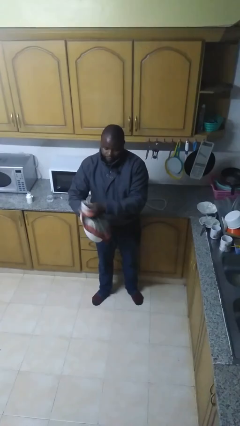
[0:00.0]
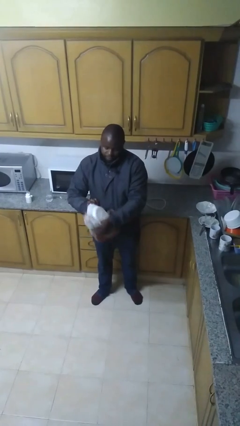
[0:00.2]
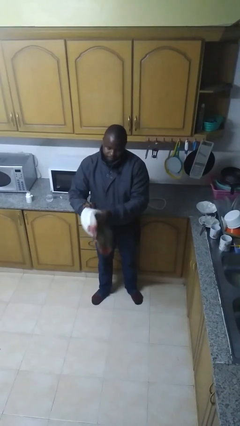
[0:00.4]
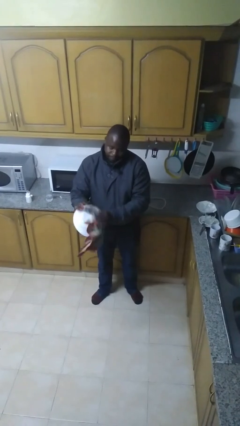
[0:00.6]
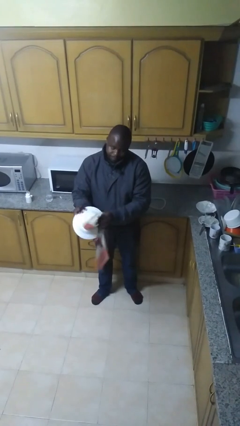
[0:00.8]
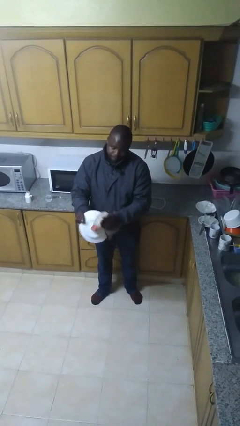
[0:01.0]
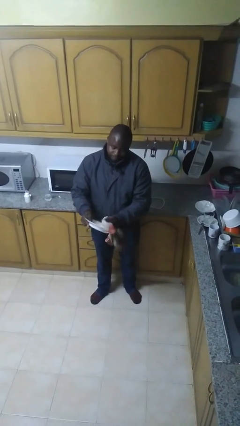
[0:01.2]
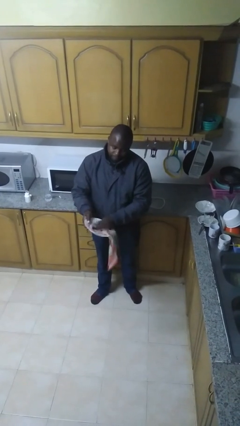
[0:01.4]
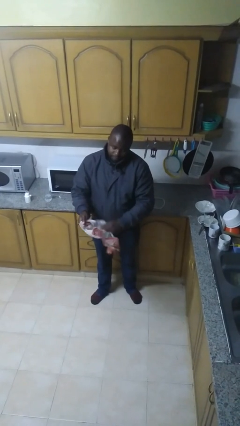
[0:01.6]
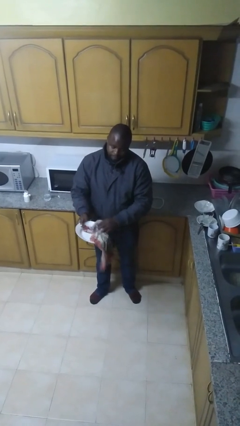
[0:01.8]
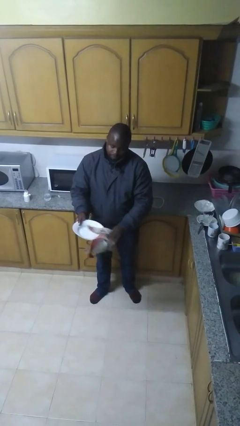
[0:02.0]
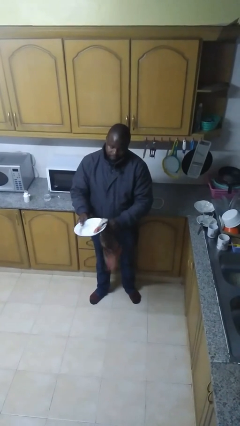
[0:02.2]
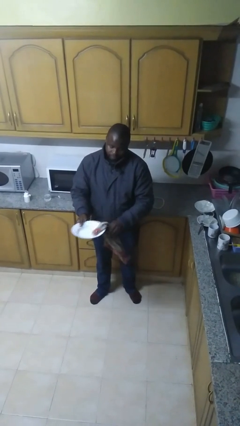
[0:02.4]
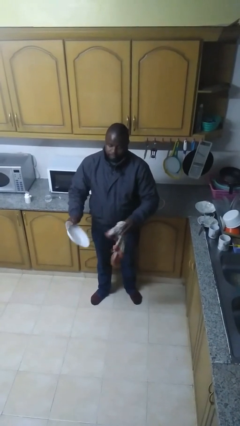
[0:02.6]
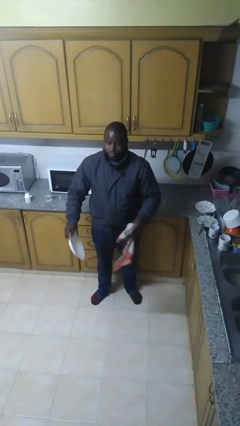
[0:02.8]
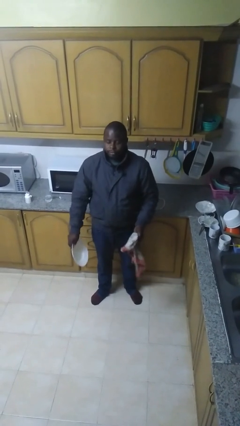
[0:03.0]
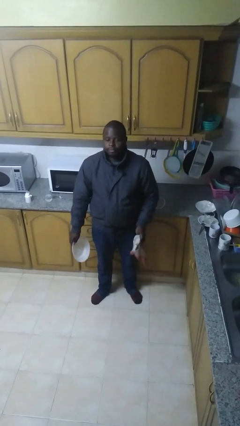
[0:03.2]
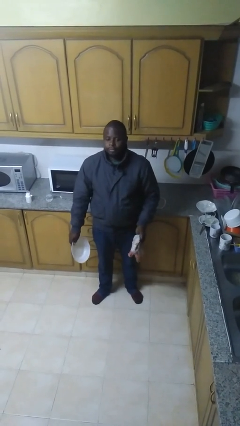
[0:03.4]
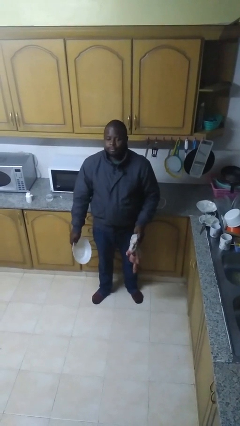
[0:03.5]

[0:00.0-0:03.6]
person dries dish

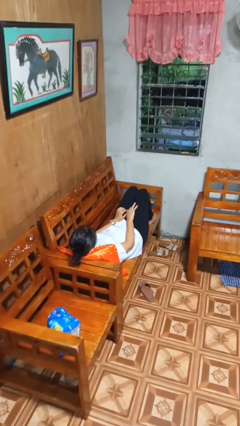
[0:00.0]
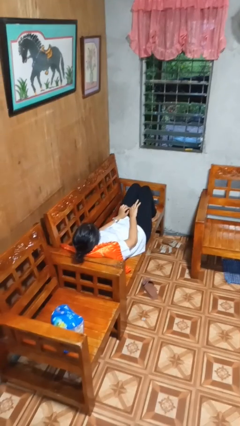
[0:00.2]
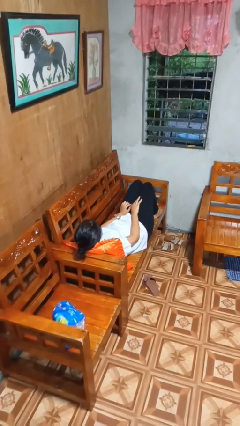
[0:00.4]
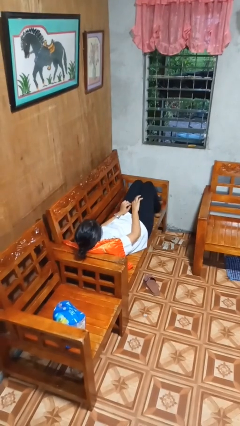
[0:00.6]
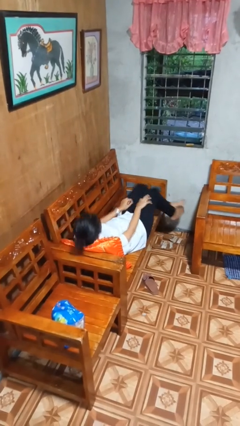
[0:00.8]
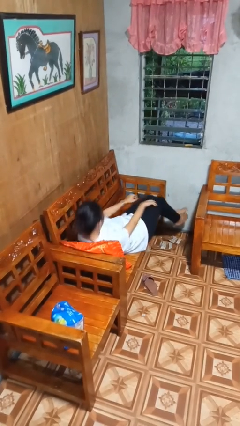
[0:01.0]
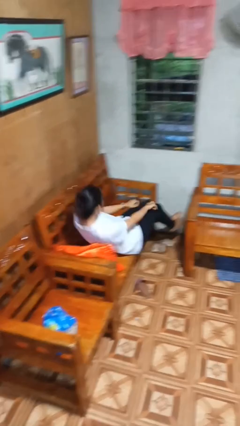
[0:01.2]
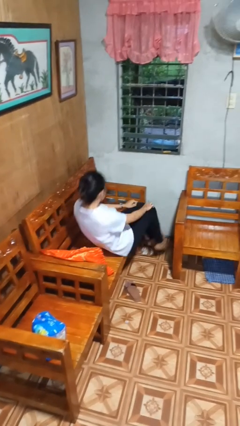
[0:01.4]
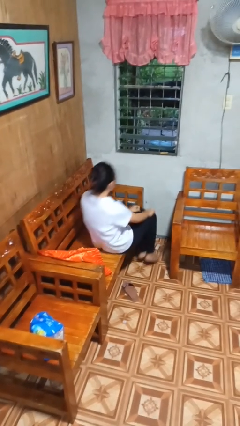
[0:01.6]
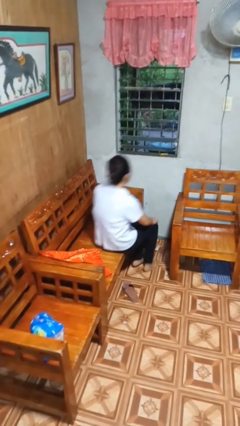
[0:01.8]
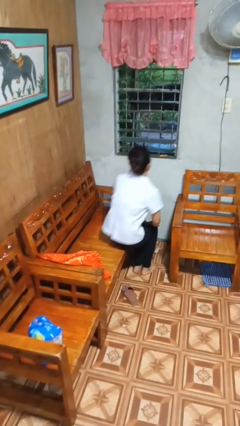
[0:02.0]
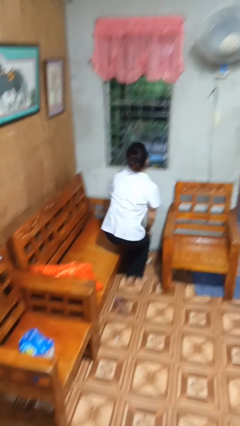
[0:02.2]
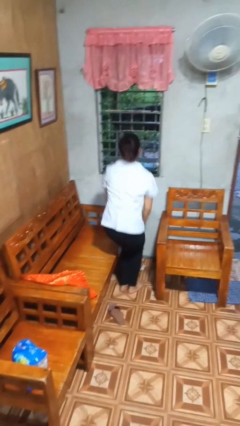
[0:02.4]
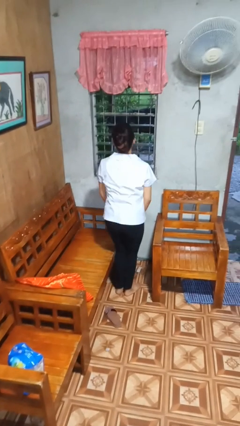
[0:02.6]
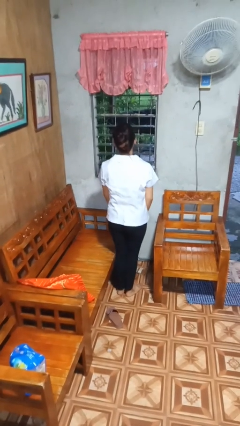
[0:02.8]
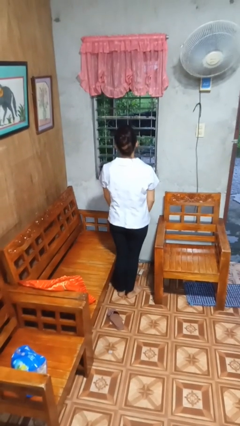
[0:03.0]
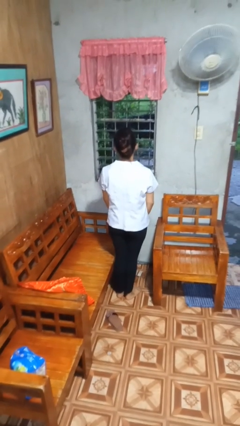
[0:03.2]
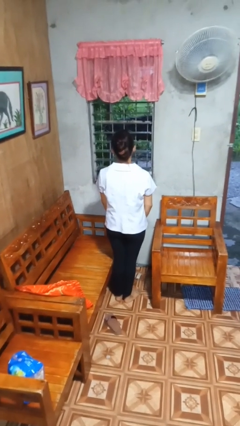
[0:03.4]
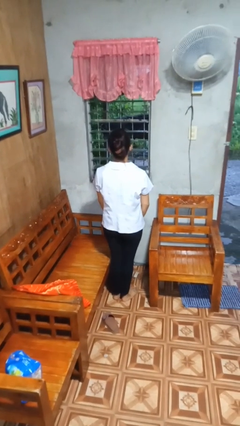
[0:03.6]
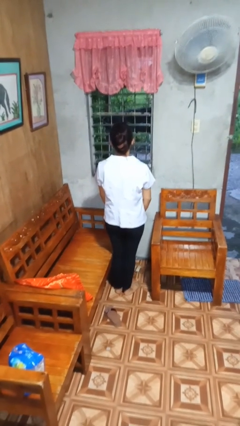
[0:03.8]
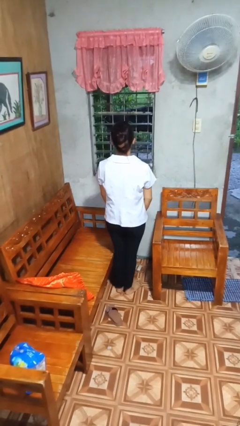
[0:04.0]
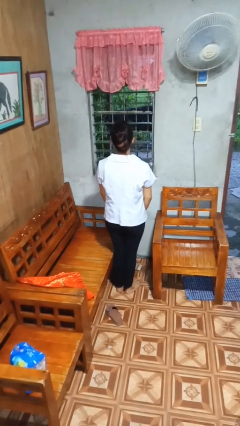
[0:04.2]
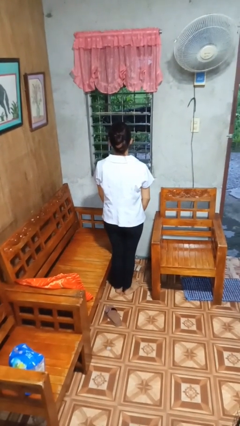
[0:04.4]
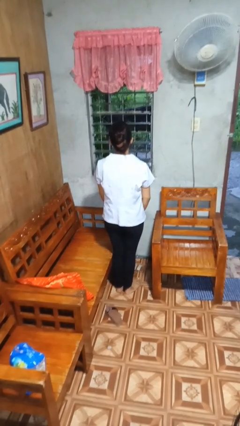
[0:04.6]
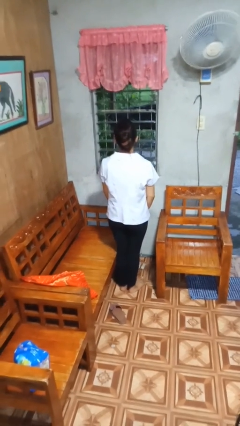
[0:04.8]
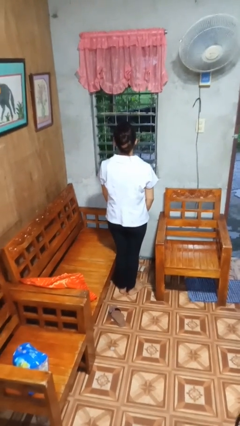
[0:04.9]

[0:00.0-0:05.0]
person stands up

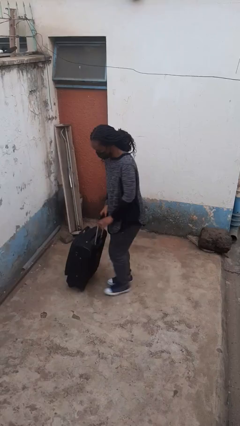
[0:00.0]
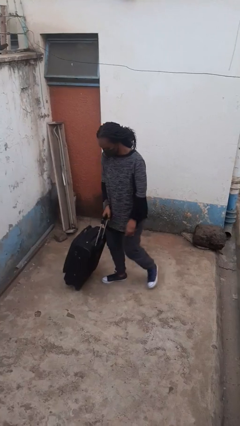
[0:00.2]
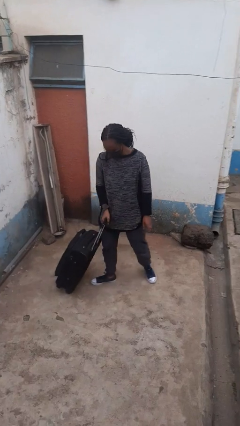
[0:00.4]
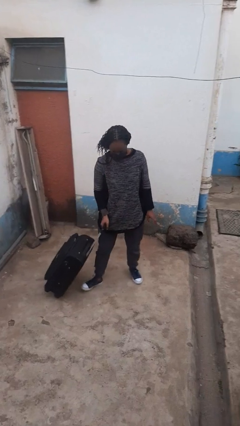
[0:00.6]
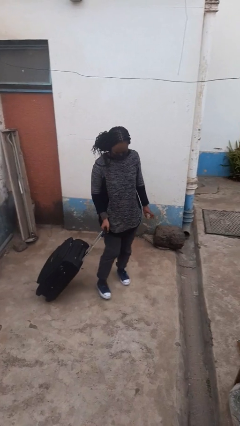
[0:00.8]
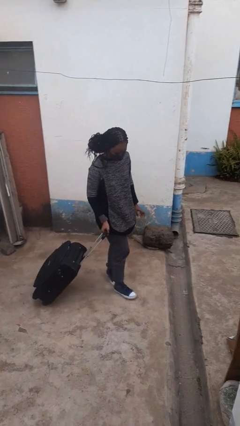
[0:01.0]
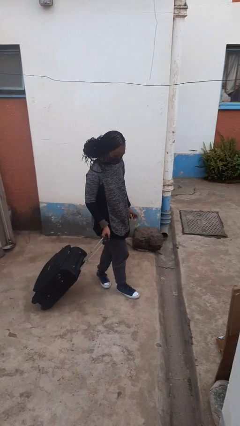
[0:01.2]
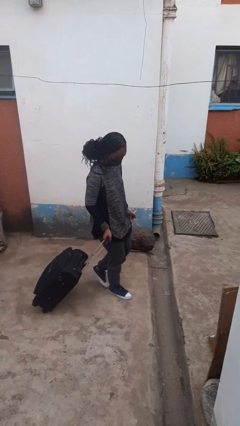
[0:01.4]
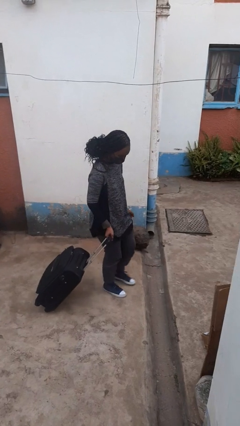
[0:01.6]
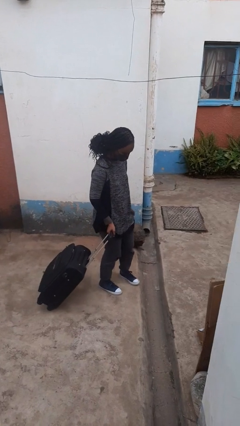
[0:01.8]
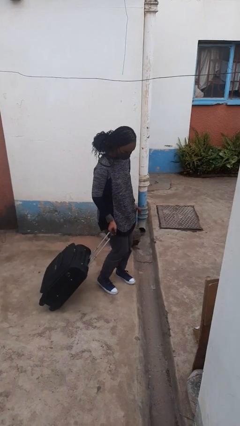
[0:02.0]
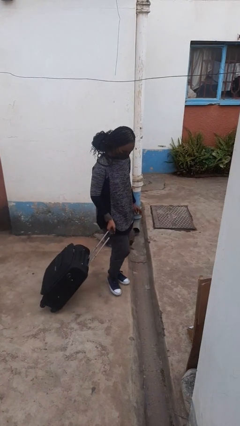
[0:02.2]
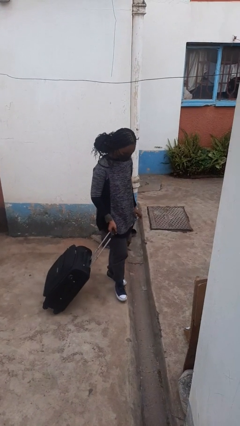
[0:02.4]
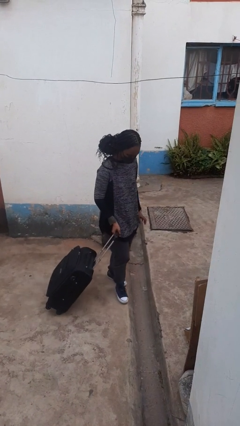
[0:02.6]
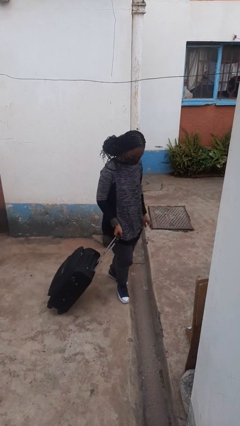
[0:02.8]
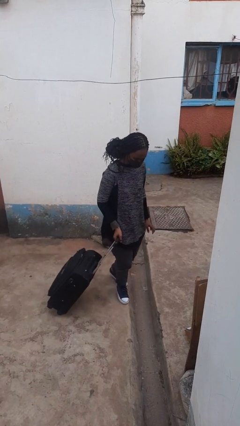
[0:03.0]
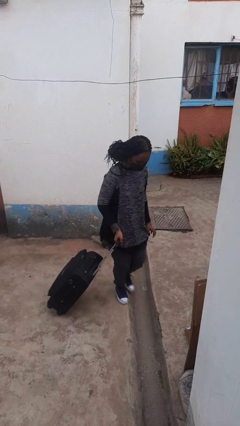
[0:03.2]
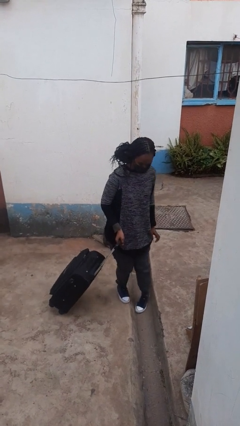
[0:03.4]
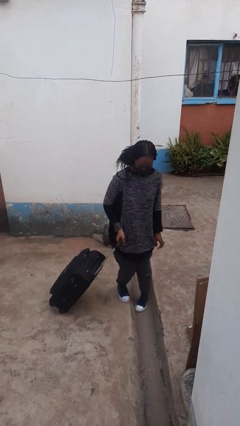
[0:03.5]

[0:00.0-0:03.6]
person pulls wheeled cart

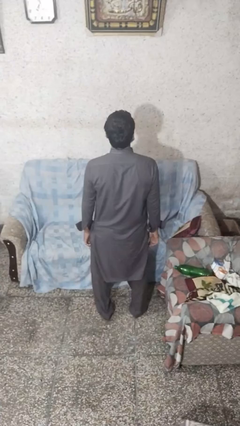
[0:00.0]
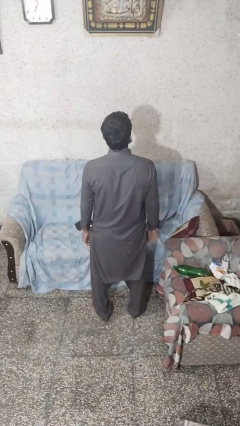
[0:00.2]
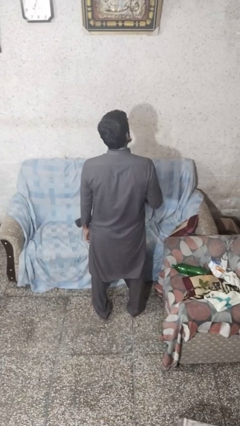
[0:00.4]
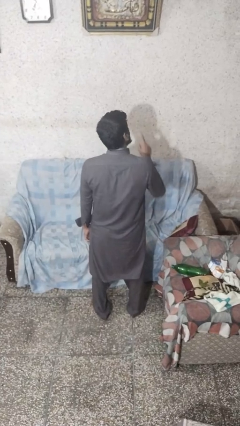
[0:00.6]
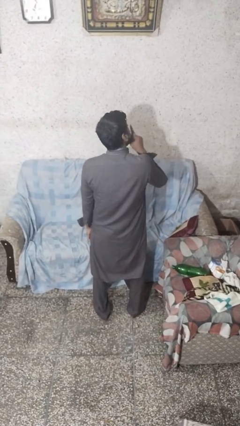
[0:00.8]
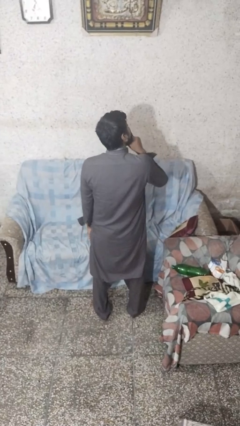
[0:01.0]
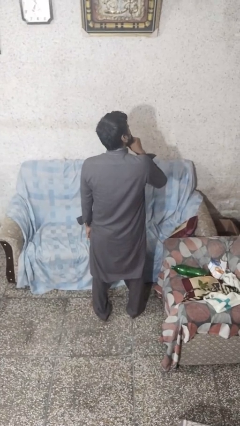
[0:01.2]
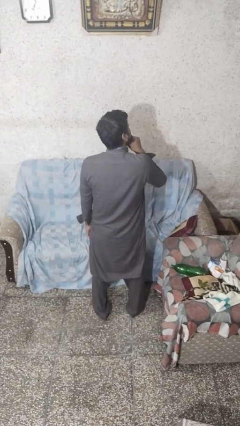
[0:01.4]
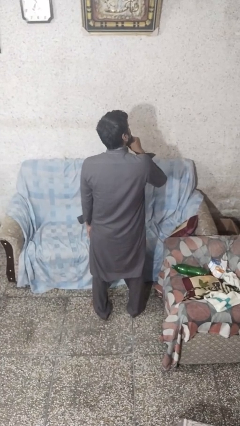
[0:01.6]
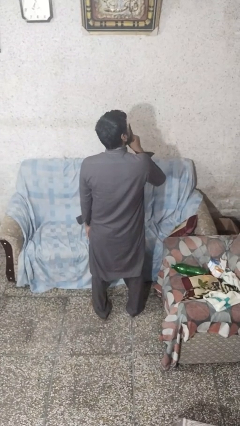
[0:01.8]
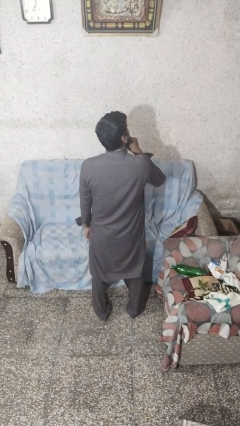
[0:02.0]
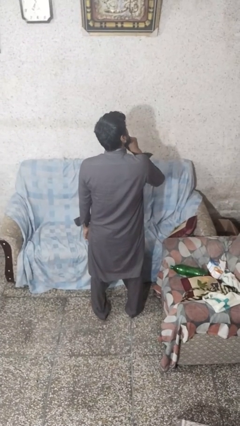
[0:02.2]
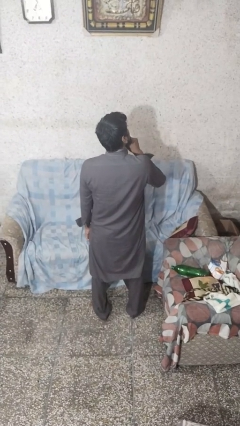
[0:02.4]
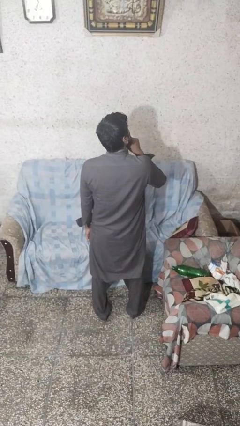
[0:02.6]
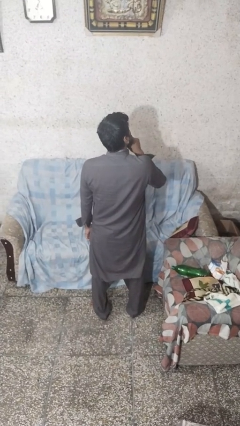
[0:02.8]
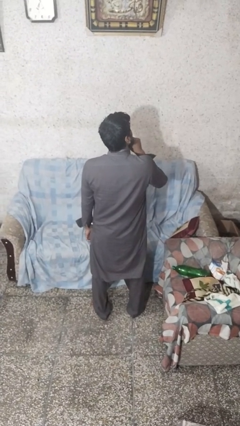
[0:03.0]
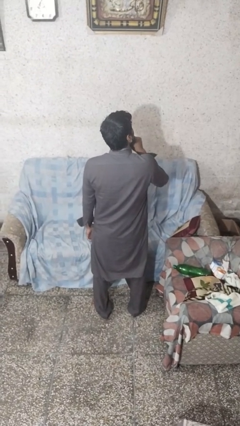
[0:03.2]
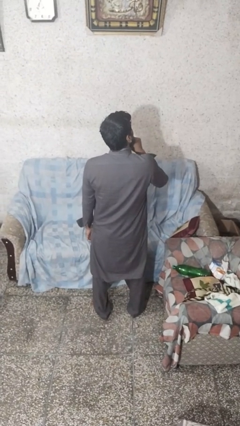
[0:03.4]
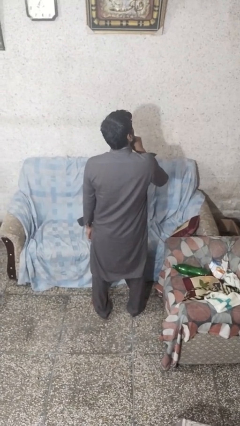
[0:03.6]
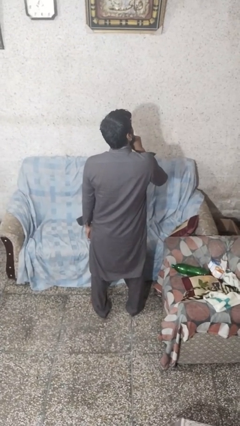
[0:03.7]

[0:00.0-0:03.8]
person gestures be quiet

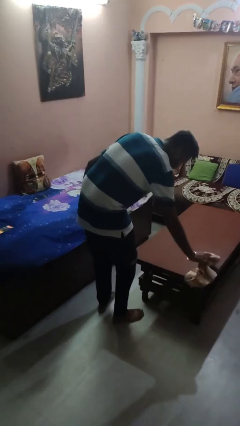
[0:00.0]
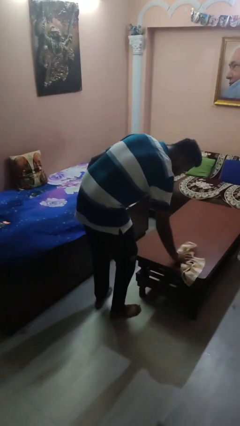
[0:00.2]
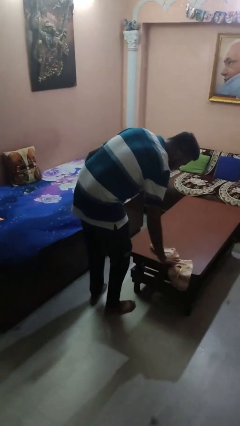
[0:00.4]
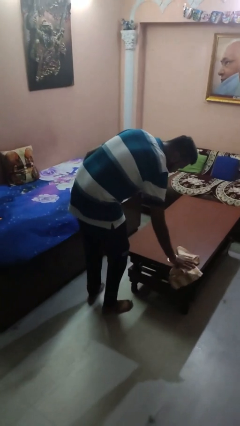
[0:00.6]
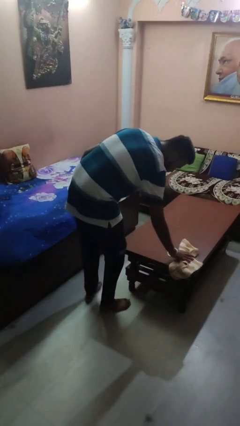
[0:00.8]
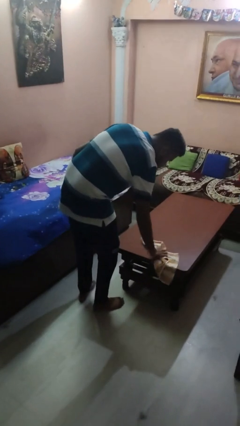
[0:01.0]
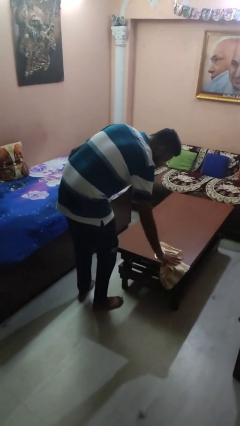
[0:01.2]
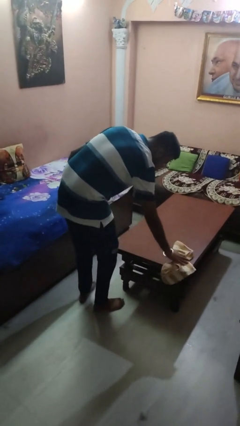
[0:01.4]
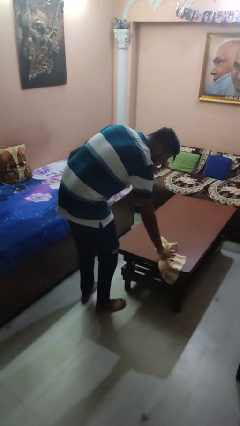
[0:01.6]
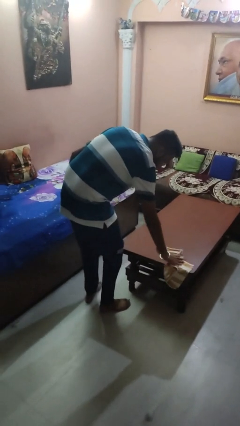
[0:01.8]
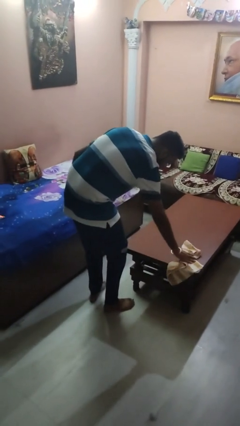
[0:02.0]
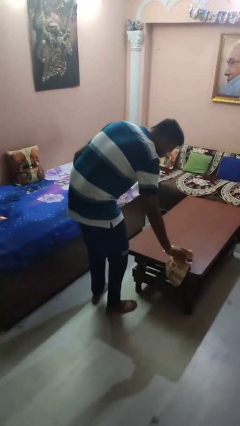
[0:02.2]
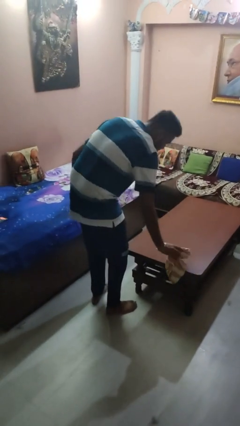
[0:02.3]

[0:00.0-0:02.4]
person cleans table with rag
